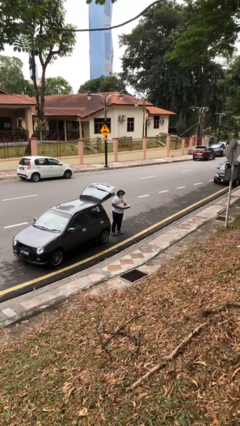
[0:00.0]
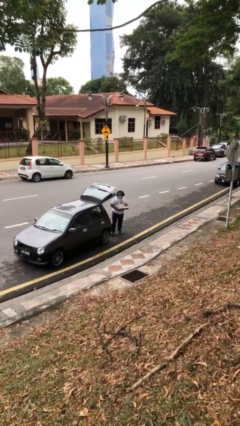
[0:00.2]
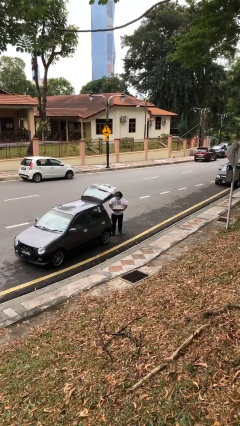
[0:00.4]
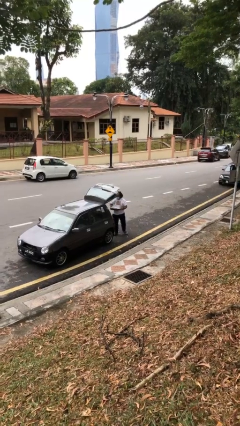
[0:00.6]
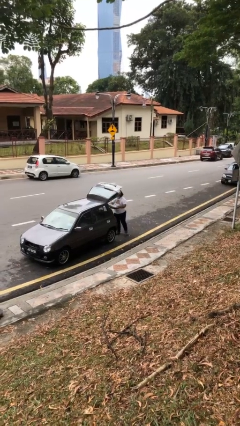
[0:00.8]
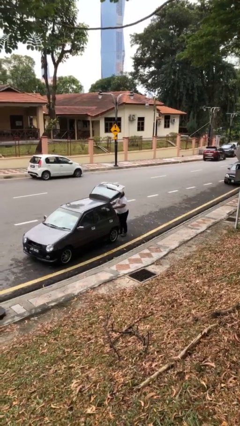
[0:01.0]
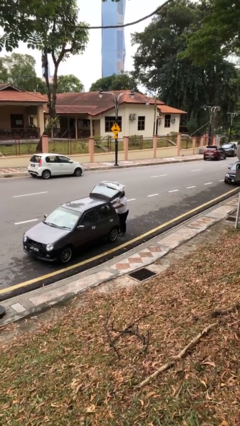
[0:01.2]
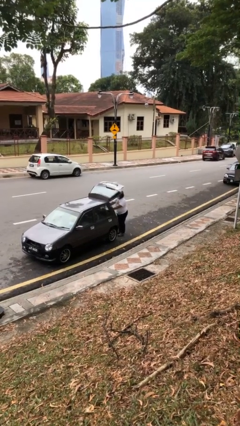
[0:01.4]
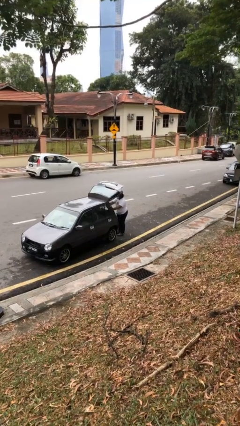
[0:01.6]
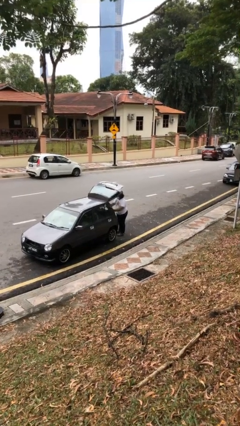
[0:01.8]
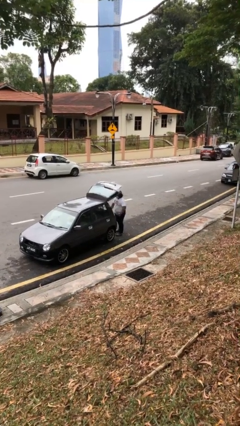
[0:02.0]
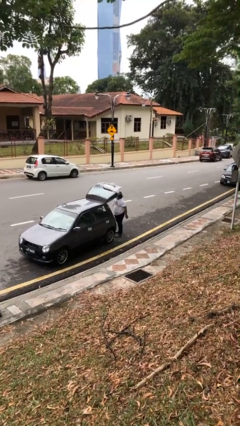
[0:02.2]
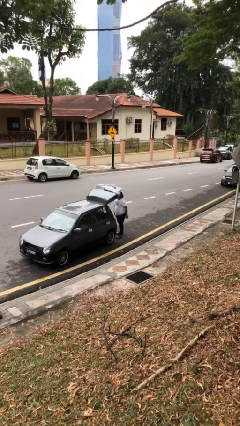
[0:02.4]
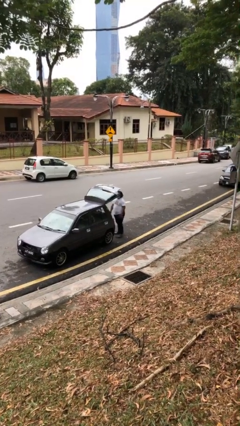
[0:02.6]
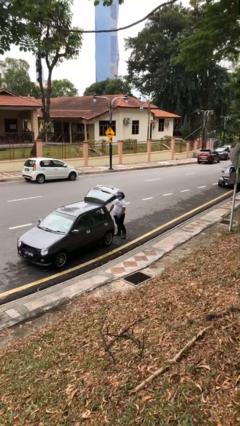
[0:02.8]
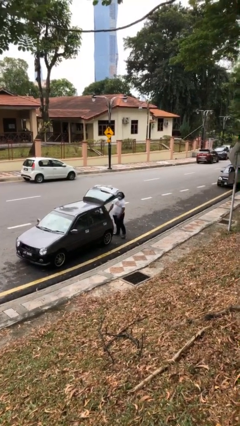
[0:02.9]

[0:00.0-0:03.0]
person loads car

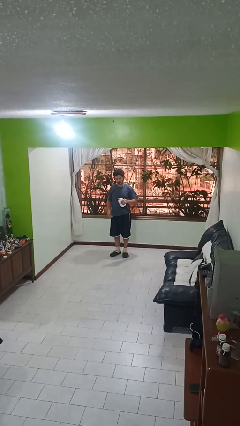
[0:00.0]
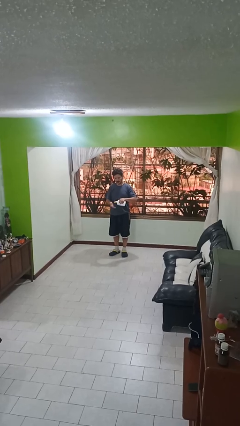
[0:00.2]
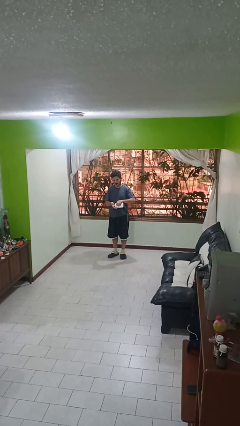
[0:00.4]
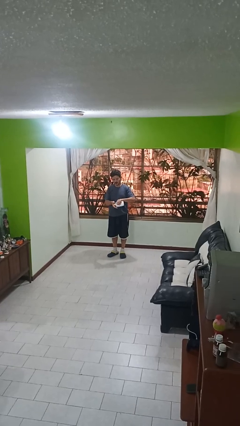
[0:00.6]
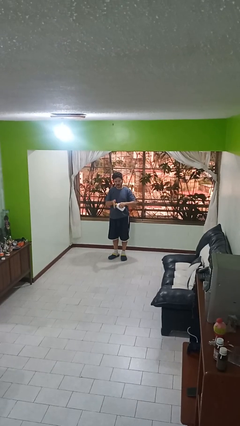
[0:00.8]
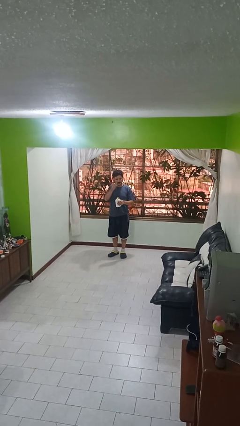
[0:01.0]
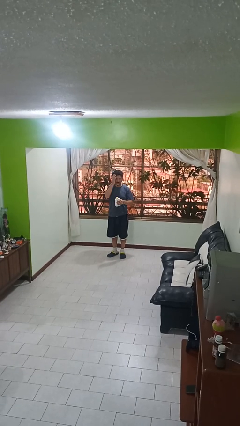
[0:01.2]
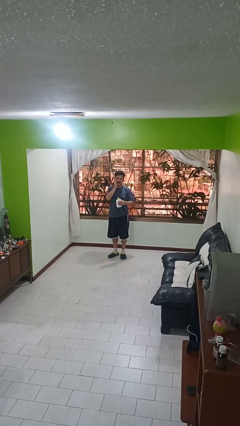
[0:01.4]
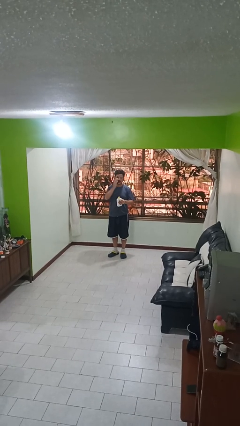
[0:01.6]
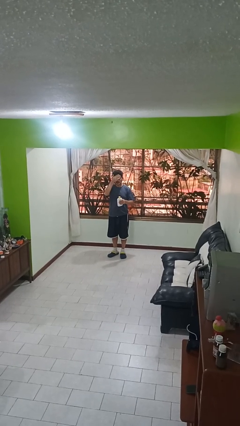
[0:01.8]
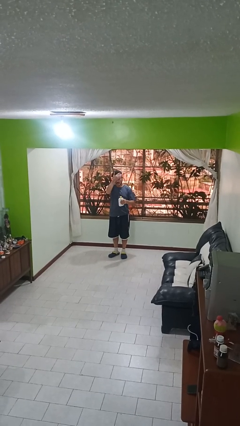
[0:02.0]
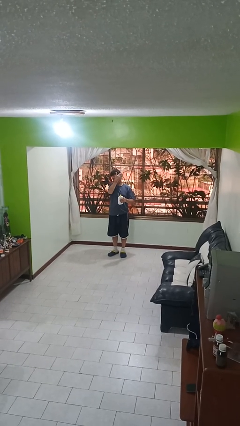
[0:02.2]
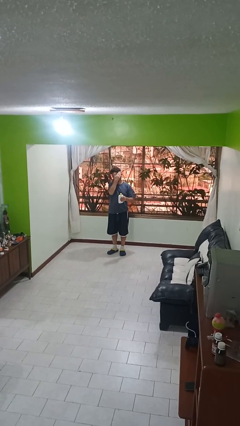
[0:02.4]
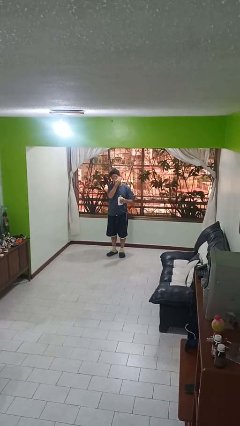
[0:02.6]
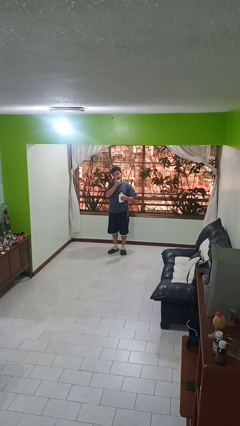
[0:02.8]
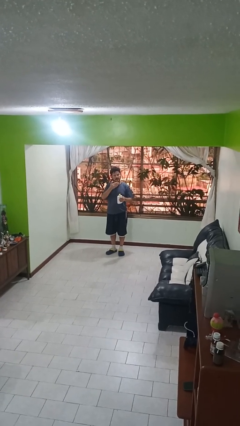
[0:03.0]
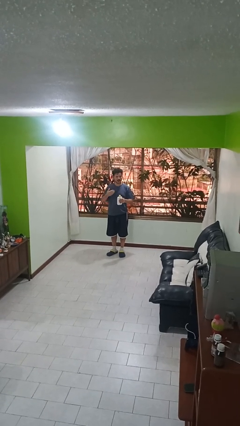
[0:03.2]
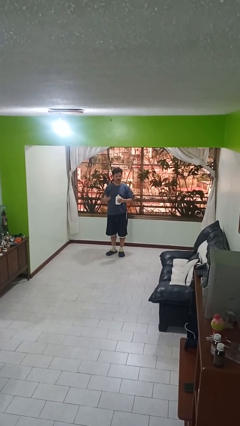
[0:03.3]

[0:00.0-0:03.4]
person applies facial moisturizer

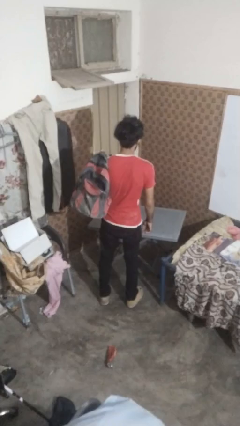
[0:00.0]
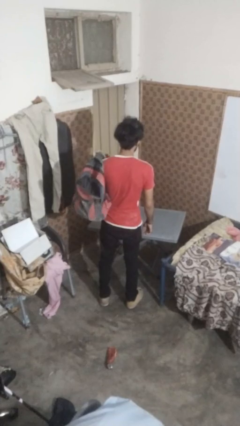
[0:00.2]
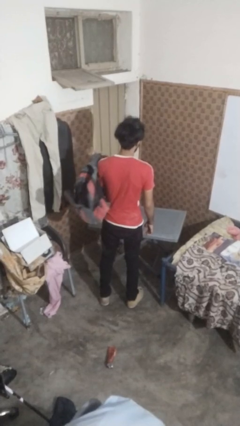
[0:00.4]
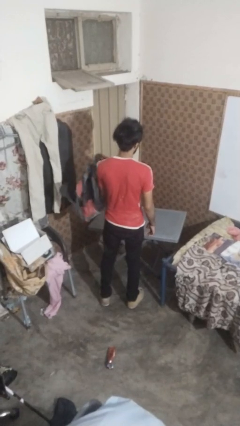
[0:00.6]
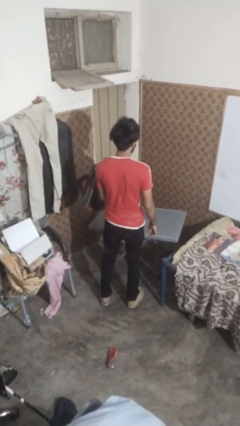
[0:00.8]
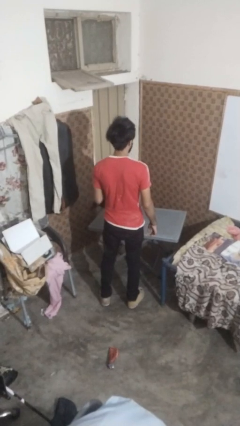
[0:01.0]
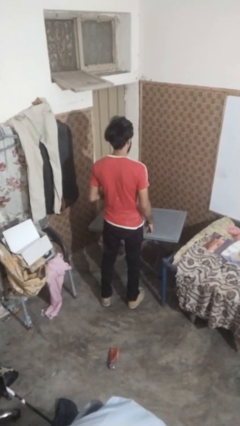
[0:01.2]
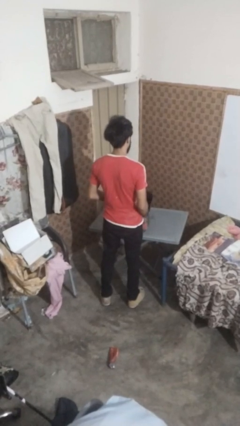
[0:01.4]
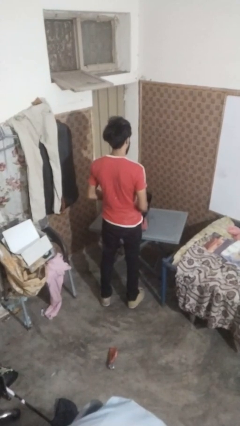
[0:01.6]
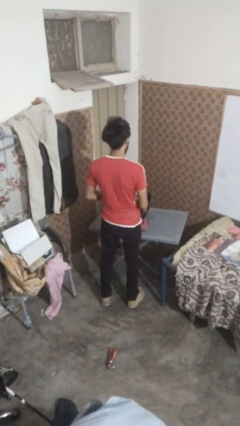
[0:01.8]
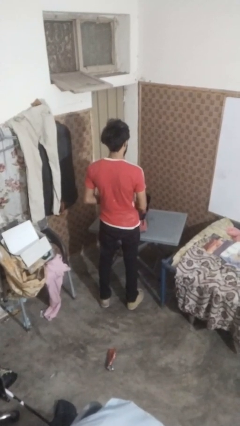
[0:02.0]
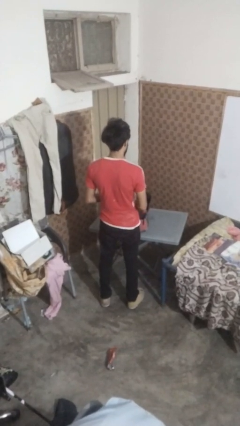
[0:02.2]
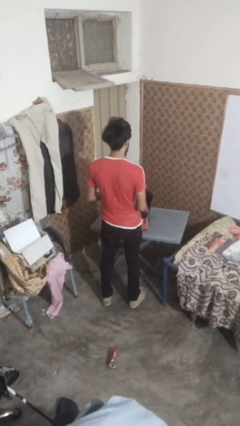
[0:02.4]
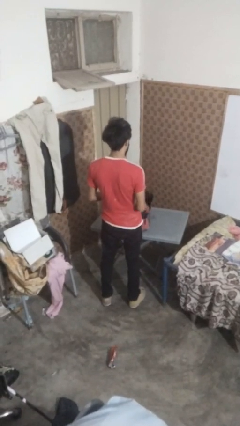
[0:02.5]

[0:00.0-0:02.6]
person takes off backpack

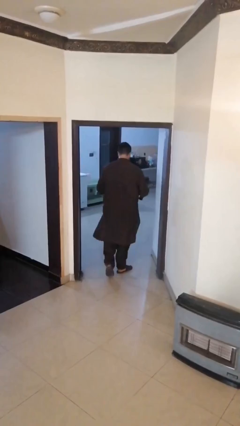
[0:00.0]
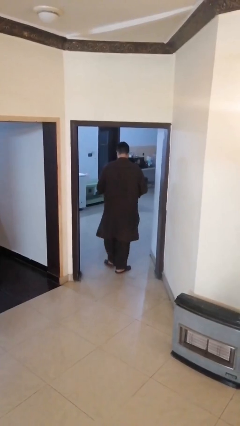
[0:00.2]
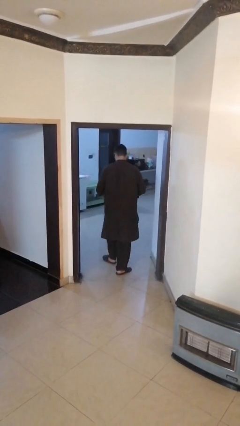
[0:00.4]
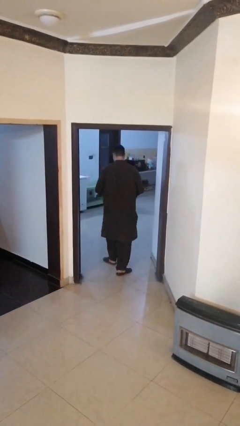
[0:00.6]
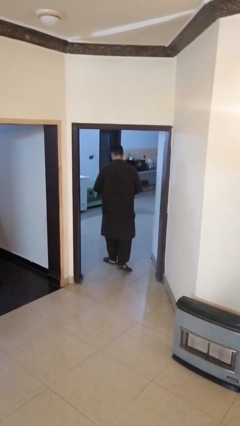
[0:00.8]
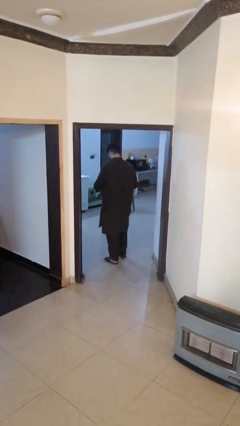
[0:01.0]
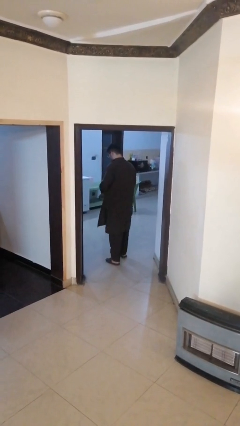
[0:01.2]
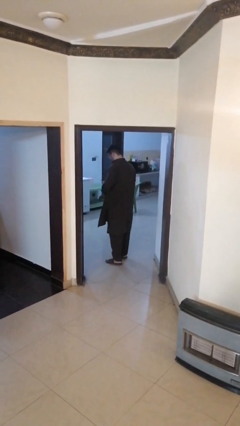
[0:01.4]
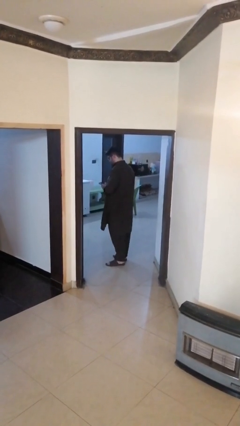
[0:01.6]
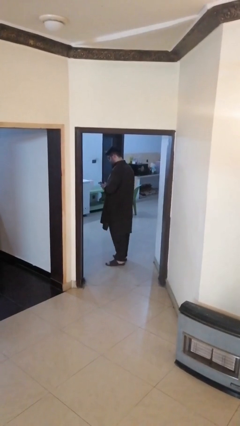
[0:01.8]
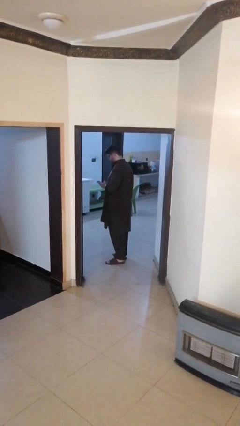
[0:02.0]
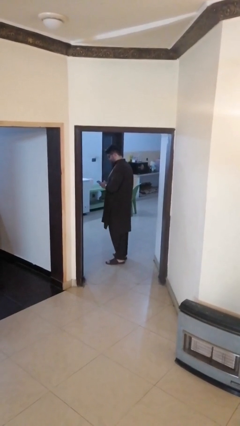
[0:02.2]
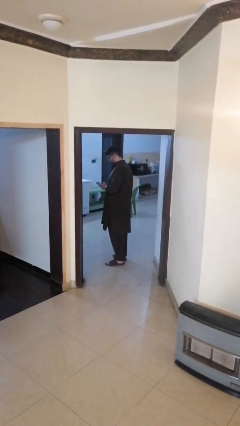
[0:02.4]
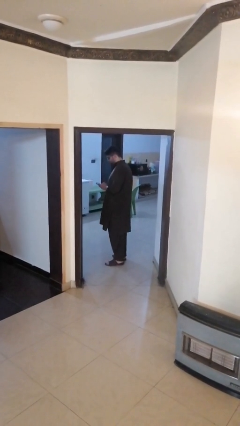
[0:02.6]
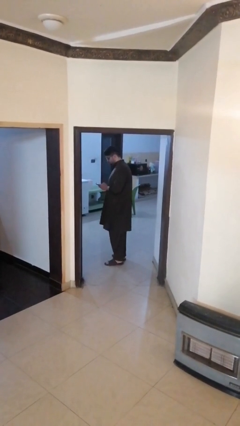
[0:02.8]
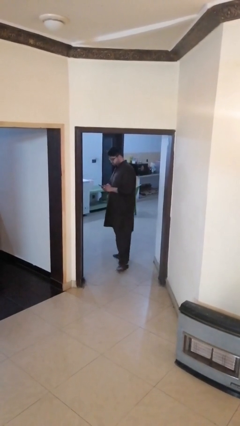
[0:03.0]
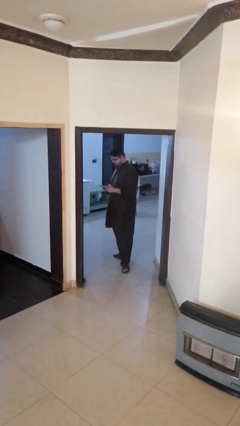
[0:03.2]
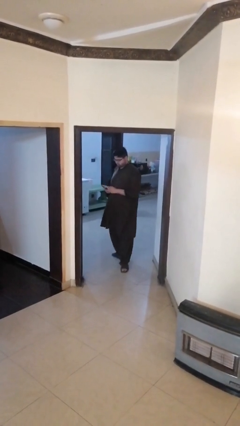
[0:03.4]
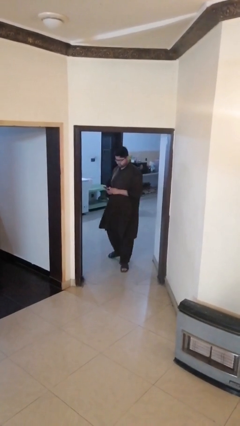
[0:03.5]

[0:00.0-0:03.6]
person exits scene through structure

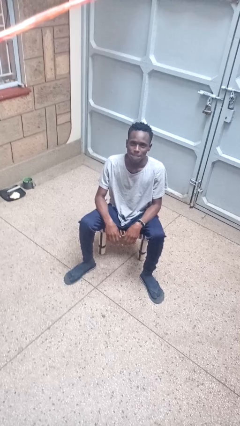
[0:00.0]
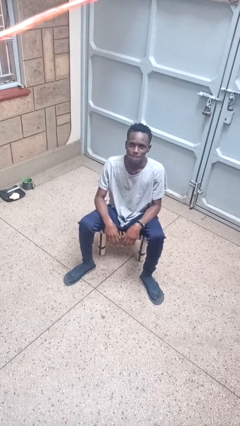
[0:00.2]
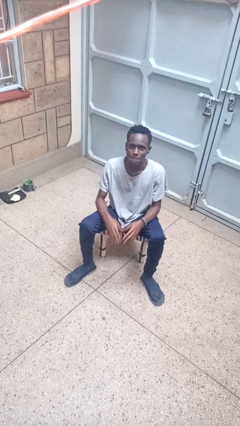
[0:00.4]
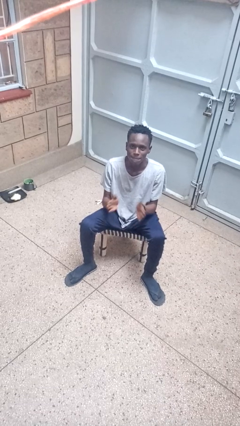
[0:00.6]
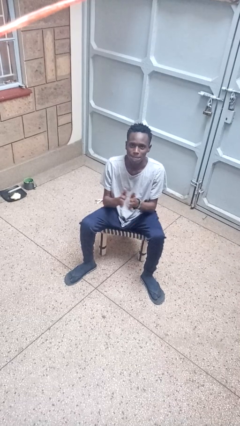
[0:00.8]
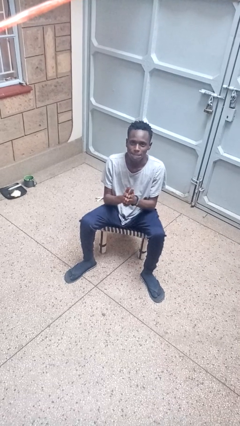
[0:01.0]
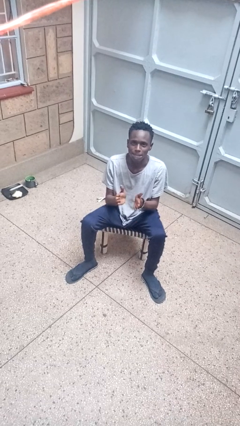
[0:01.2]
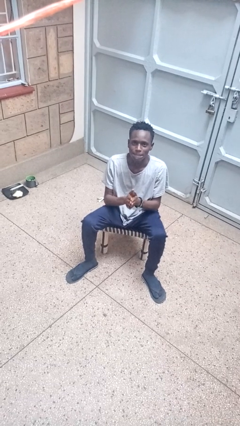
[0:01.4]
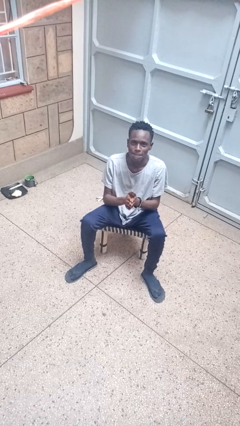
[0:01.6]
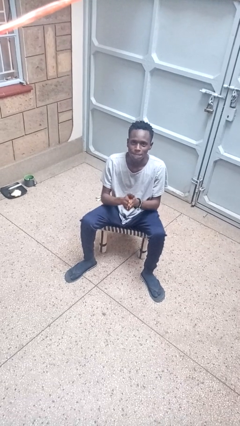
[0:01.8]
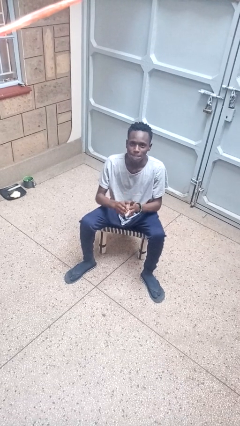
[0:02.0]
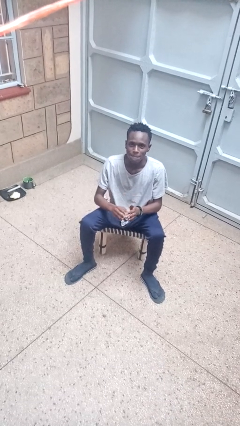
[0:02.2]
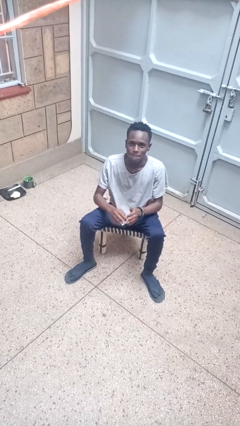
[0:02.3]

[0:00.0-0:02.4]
person claps hands

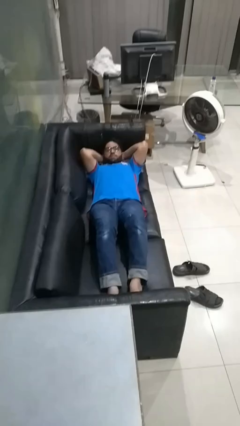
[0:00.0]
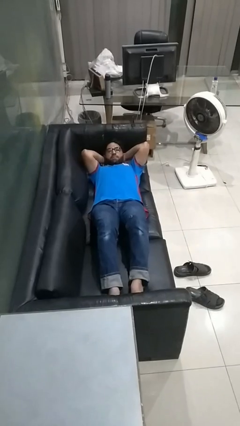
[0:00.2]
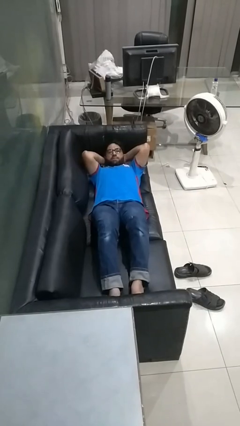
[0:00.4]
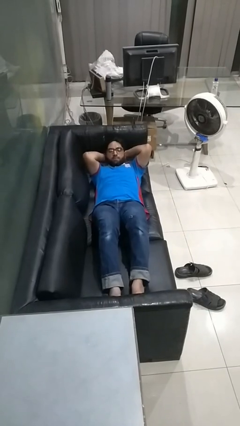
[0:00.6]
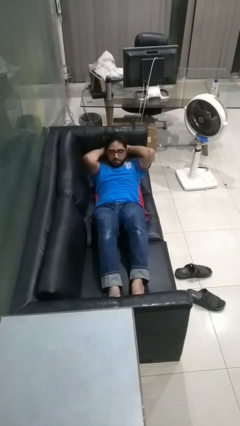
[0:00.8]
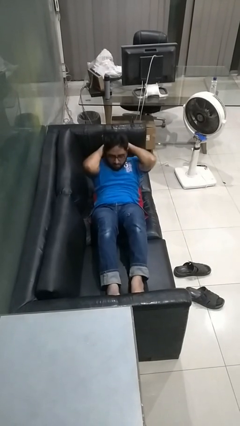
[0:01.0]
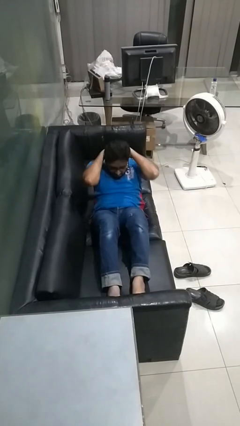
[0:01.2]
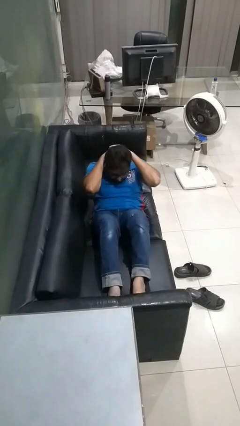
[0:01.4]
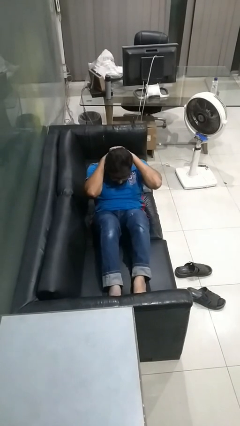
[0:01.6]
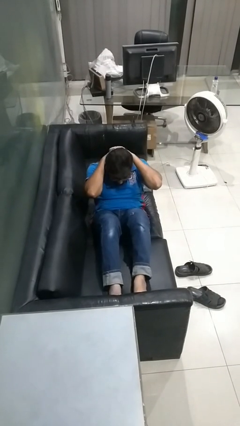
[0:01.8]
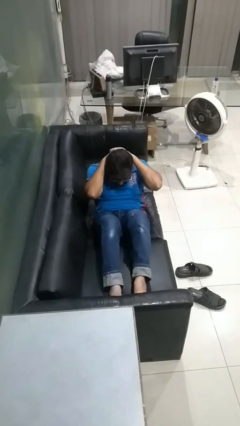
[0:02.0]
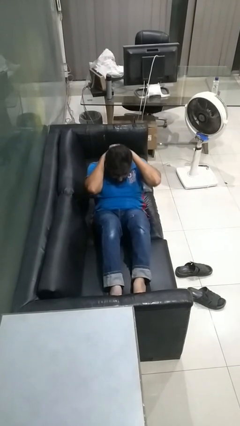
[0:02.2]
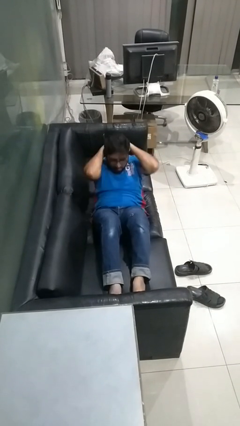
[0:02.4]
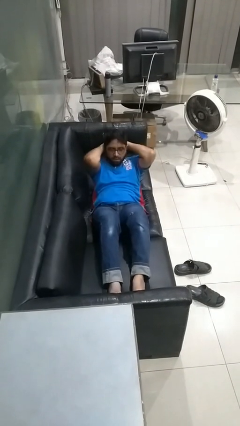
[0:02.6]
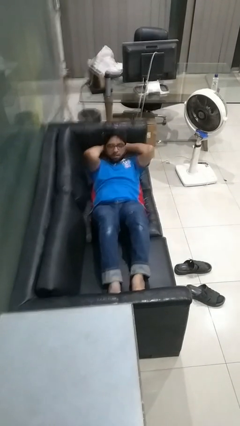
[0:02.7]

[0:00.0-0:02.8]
person exercises with situp
